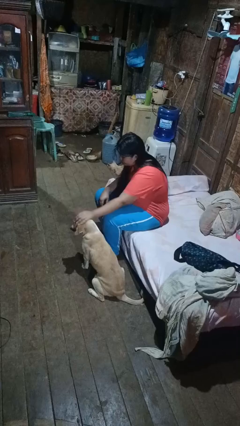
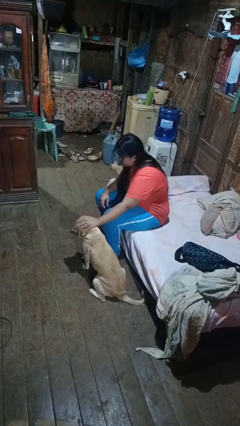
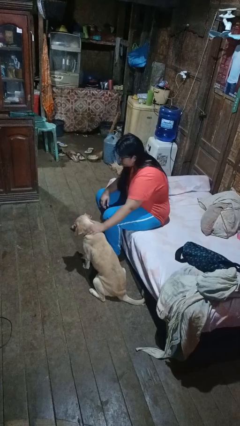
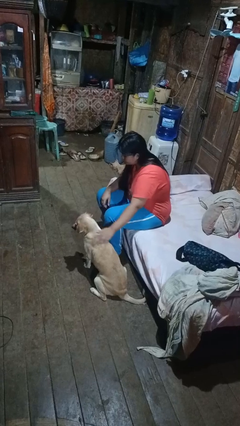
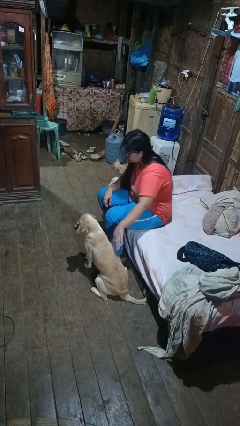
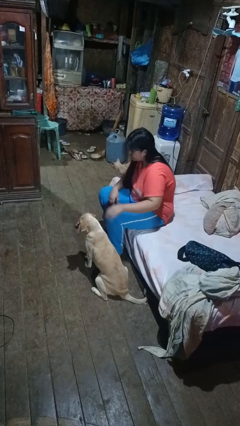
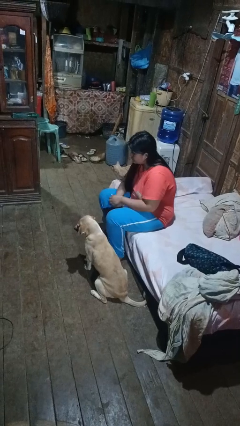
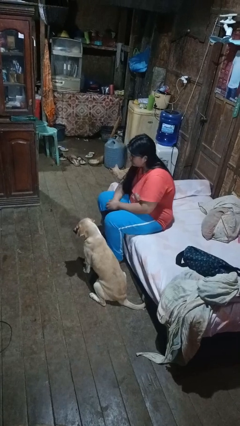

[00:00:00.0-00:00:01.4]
person pets dog

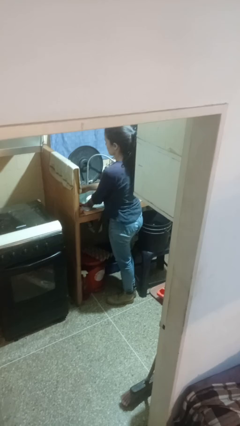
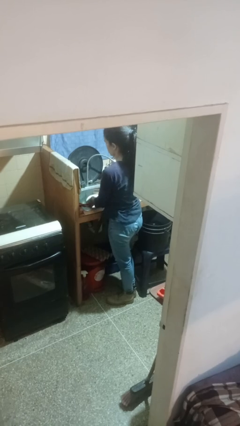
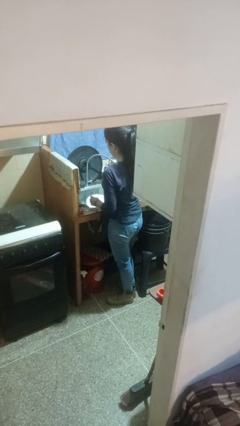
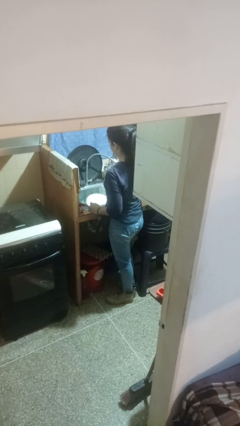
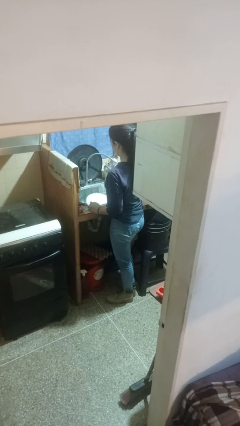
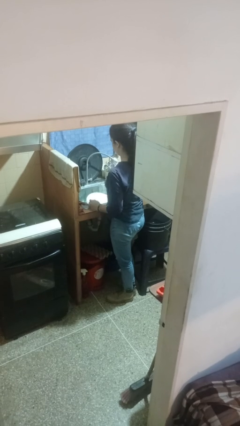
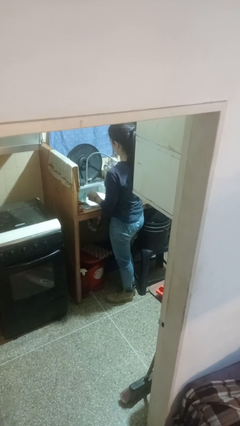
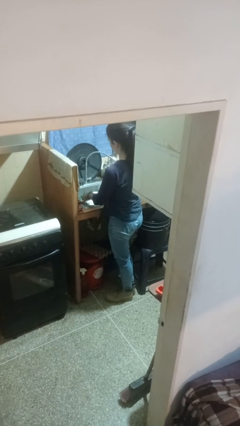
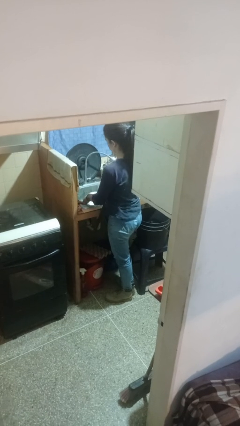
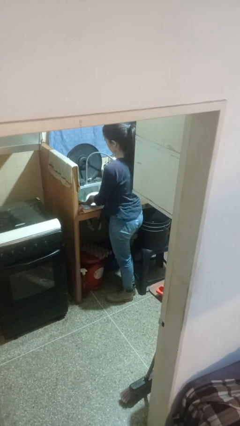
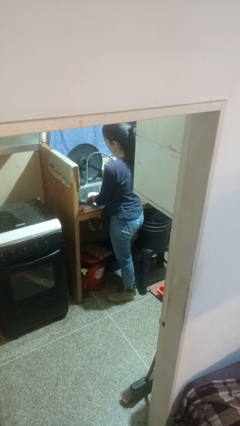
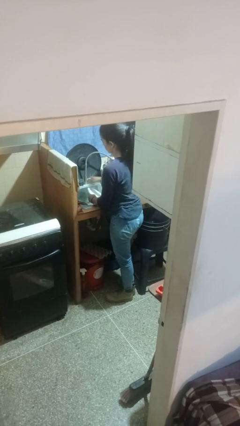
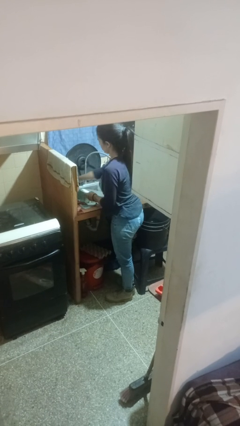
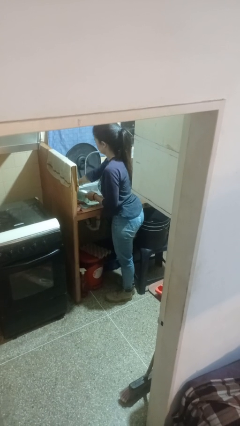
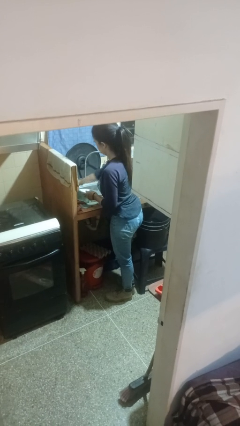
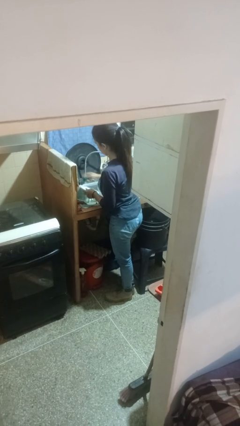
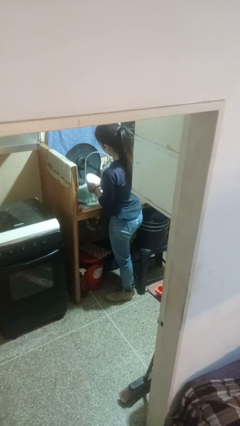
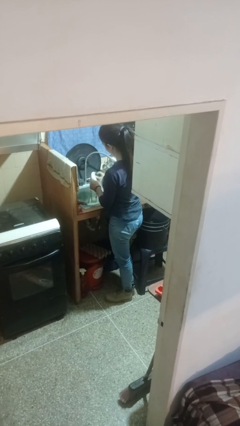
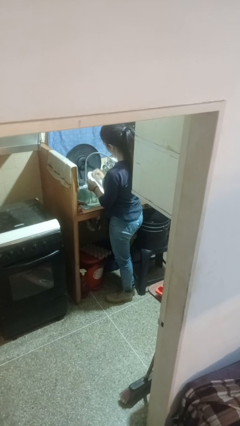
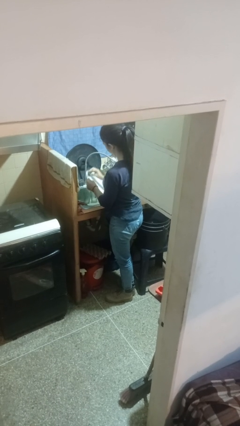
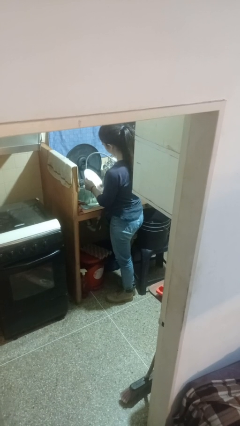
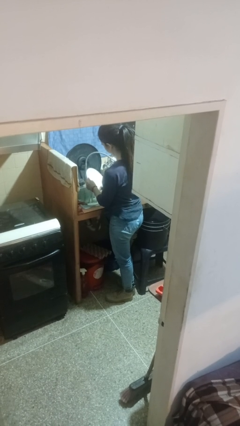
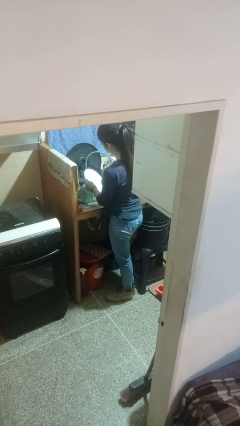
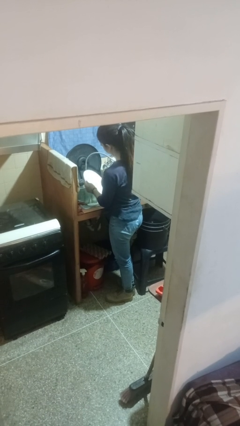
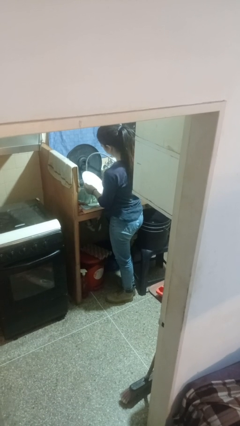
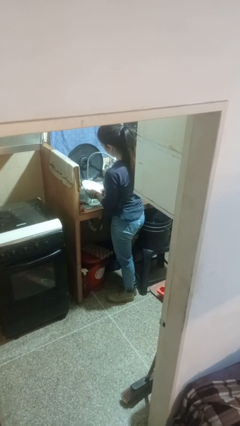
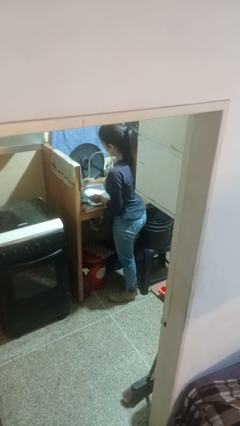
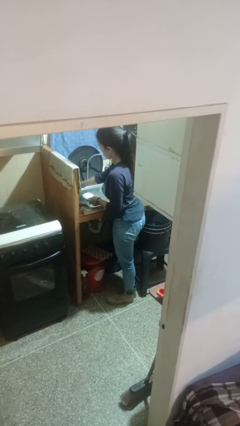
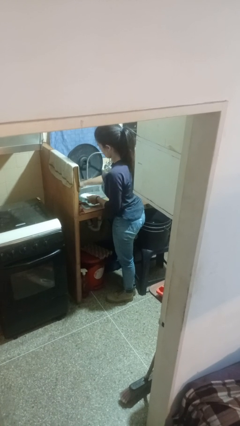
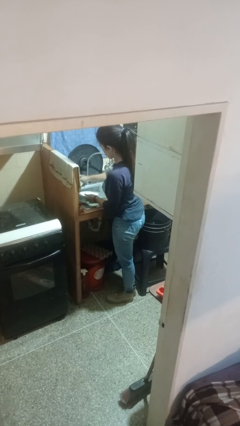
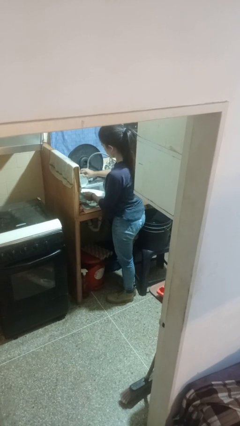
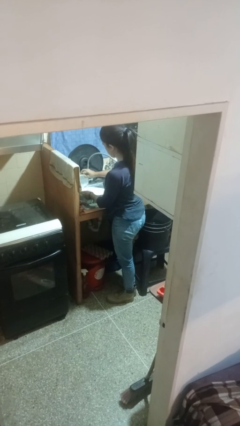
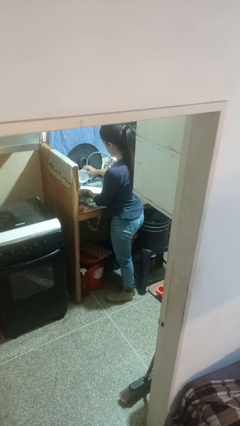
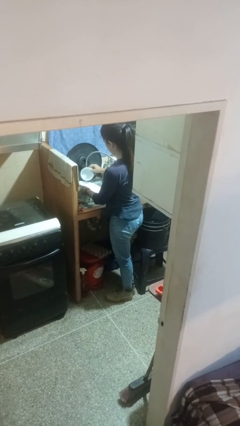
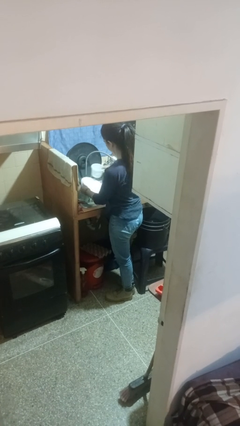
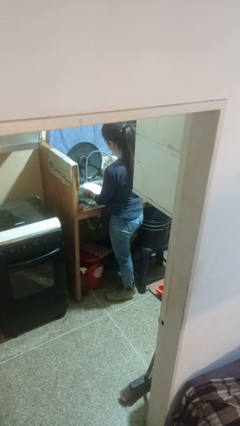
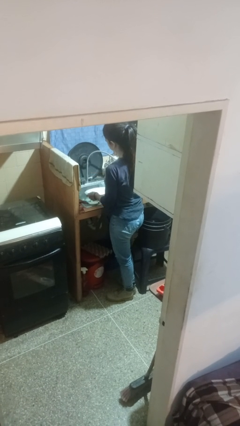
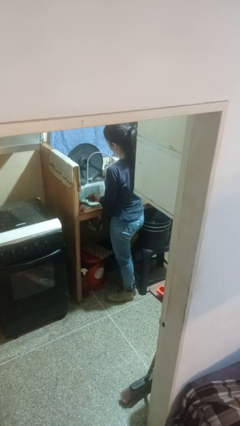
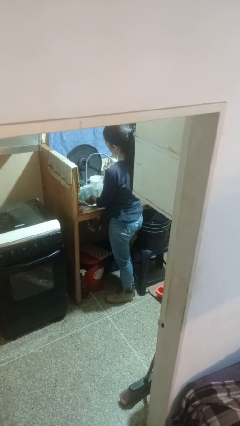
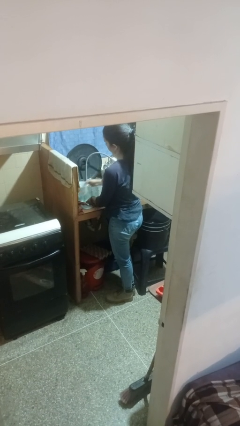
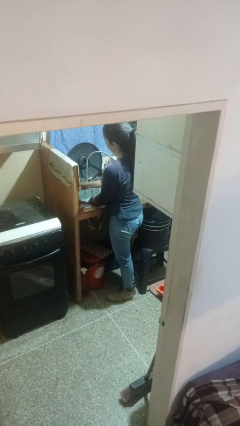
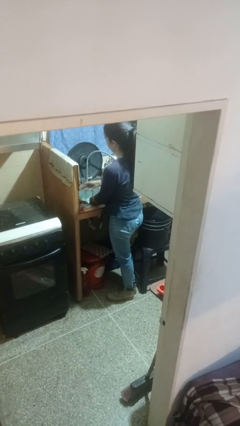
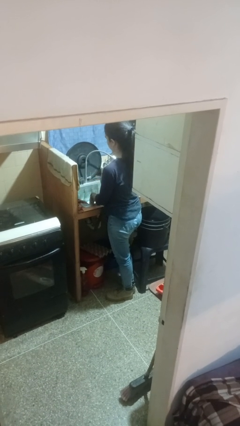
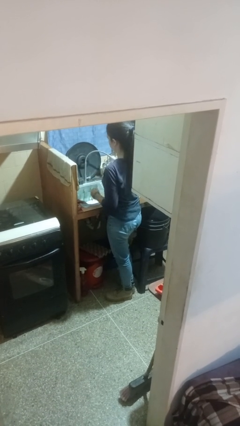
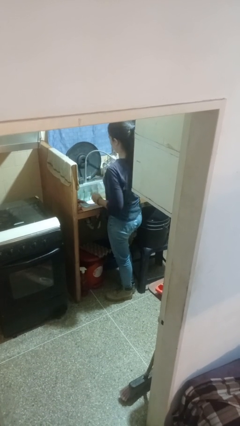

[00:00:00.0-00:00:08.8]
person washes dish

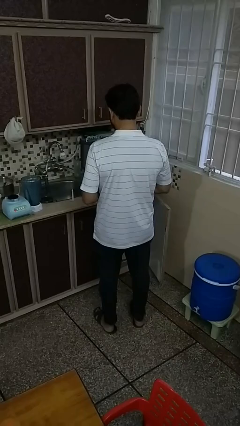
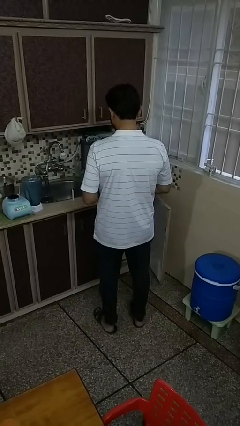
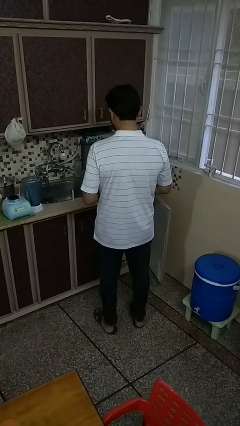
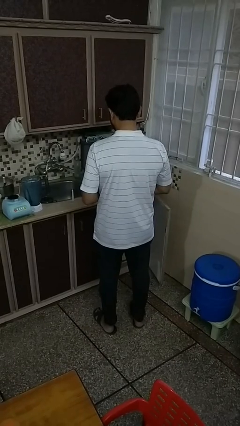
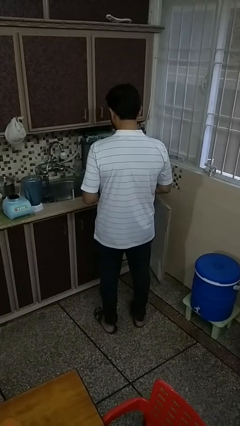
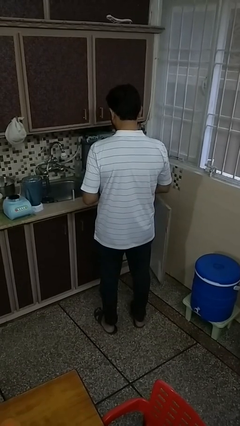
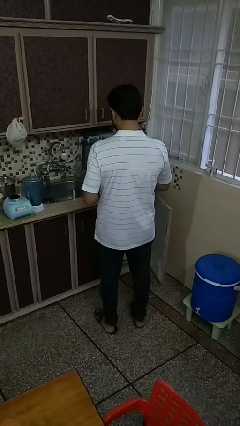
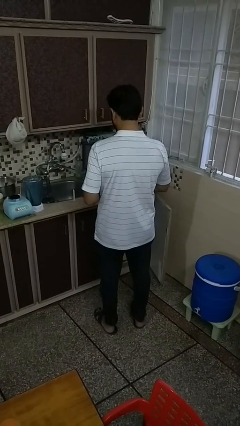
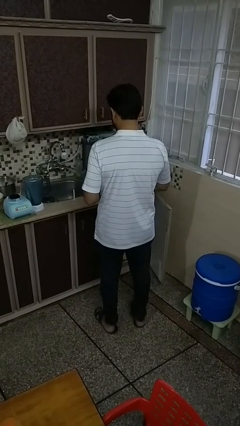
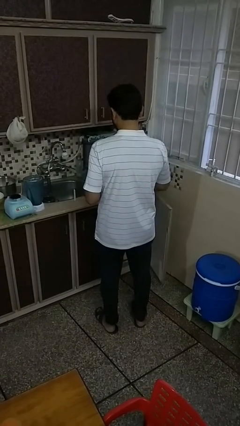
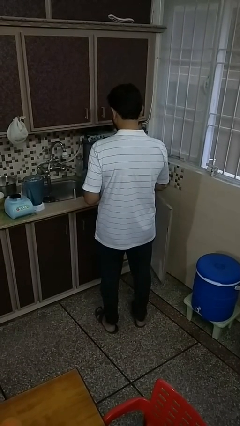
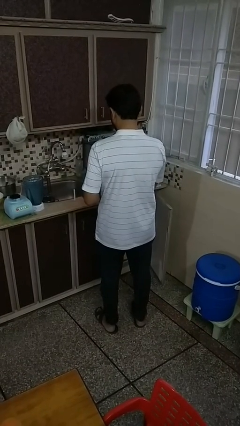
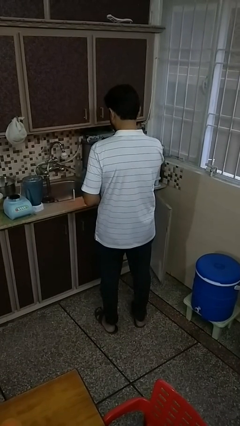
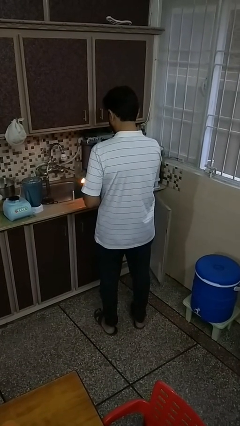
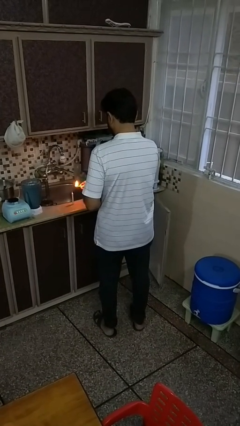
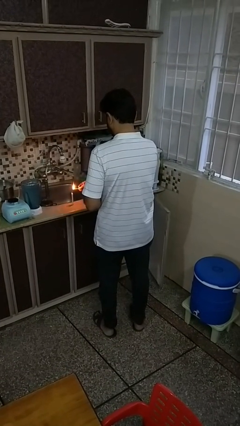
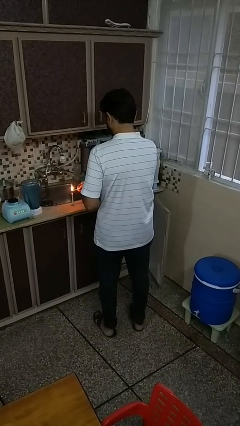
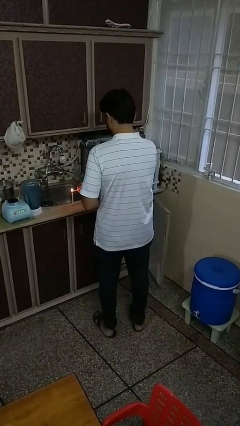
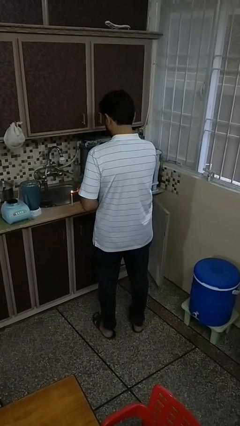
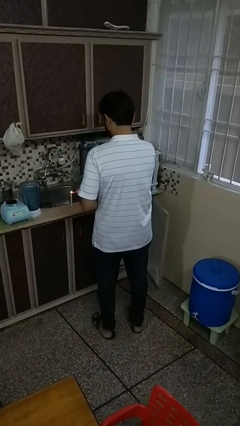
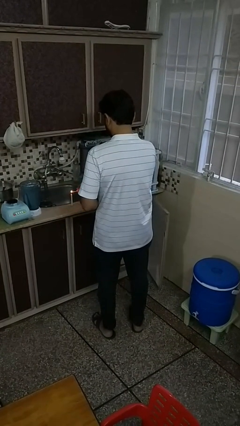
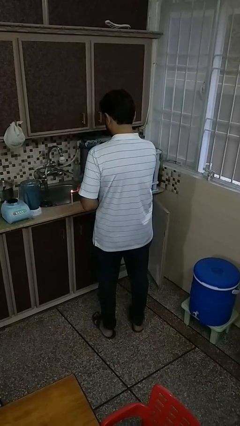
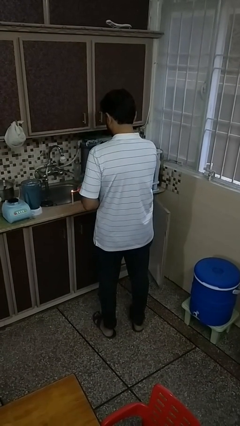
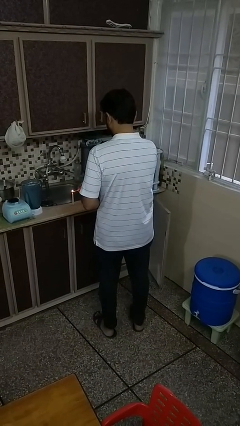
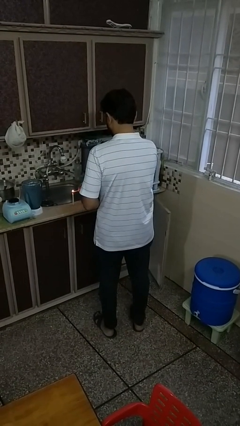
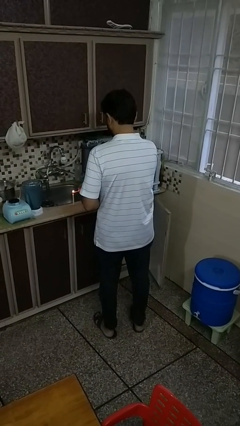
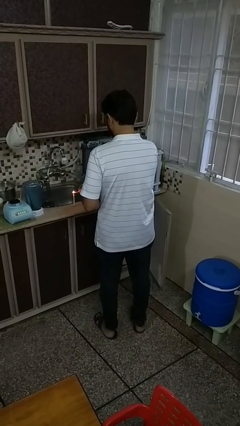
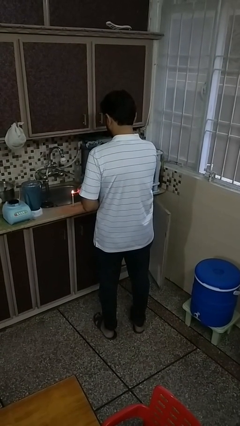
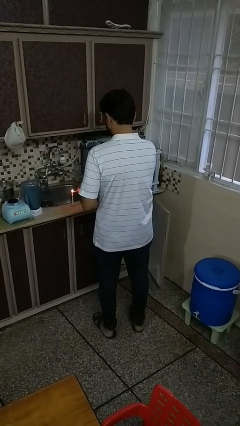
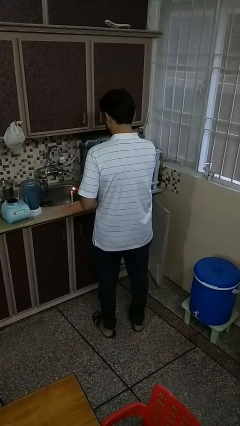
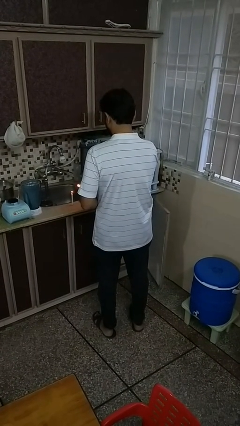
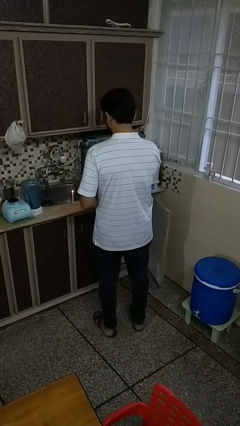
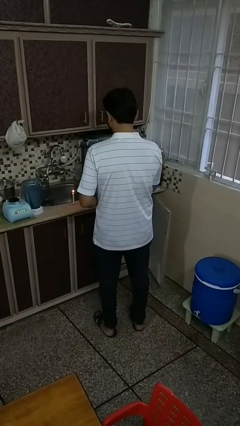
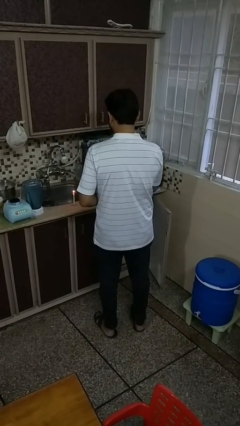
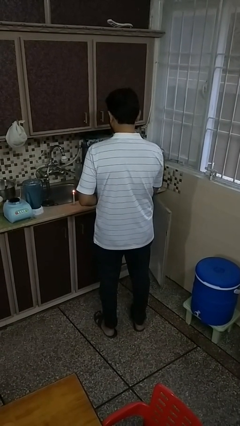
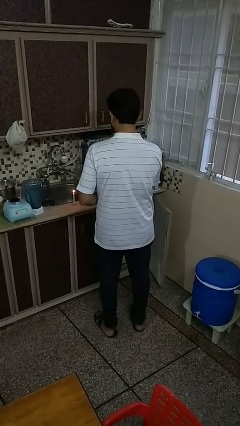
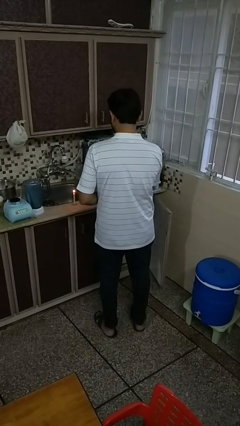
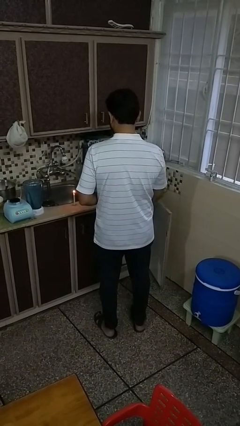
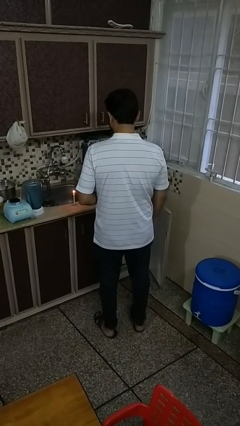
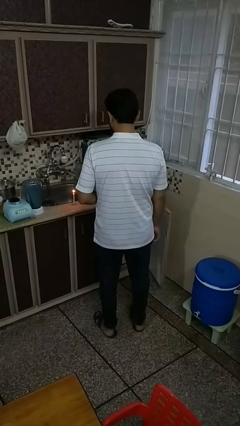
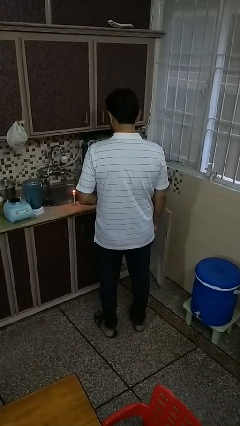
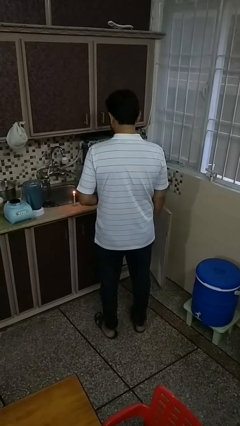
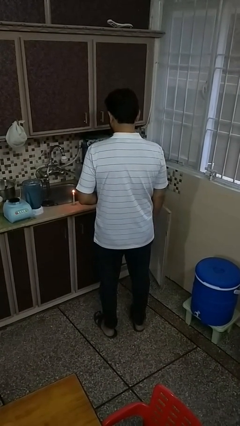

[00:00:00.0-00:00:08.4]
person lights candle
